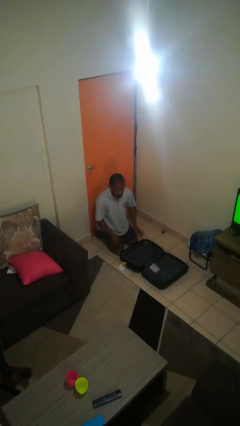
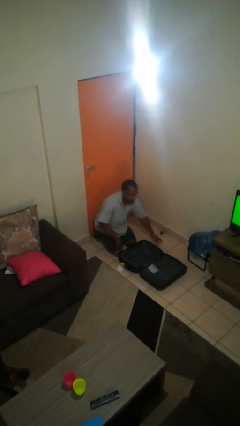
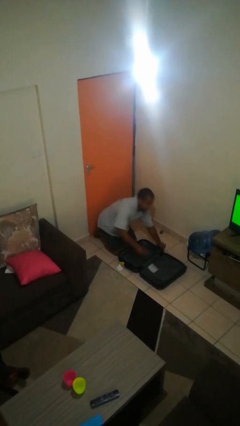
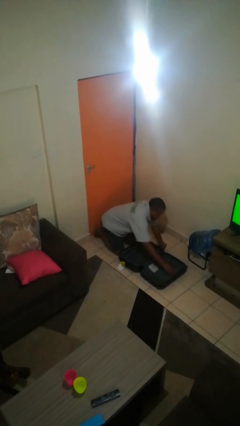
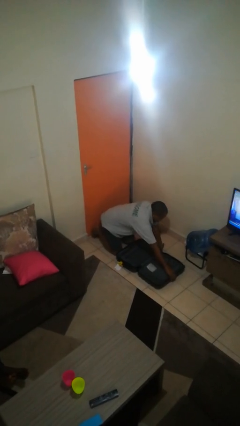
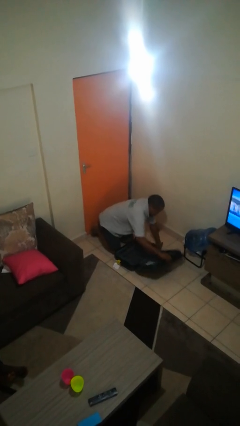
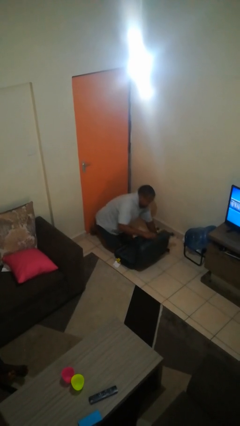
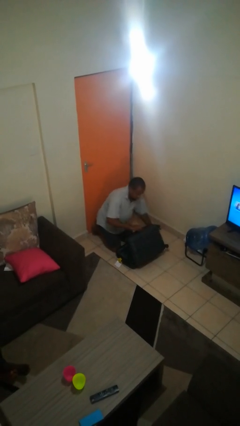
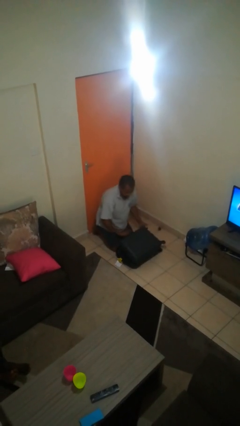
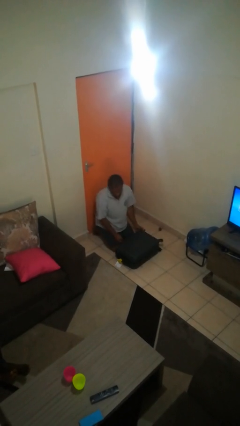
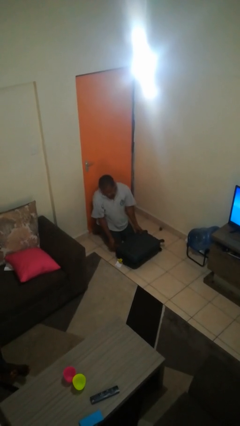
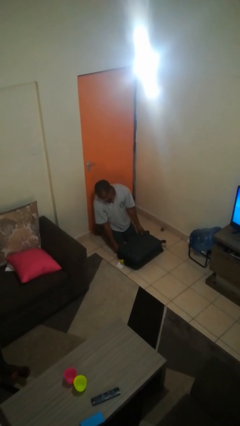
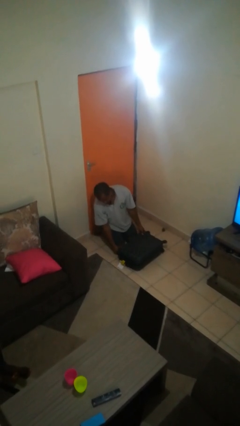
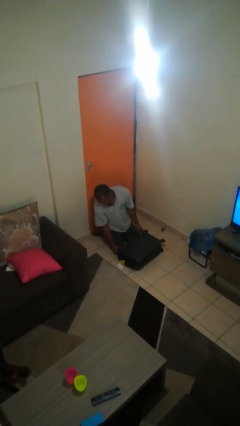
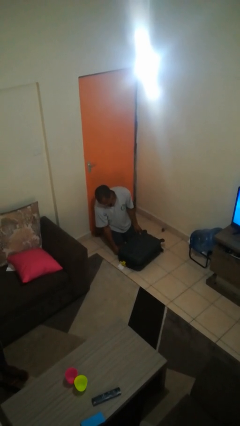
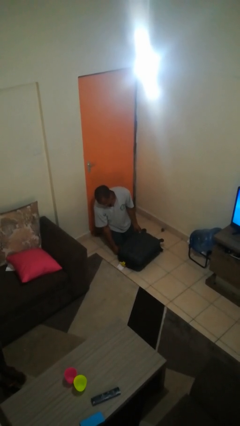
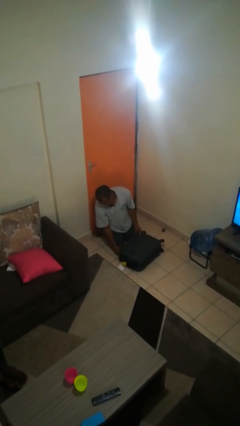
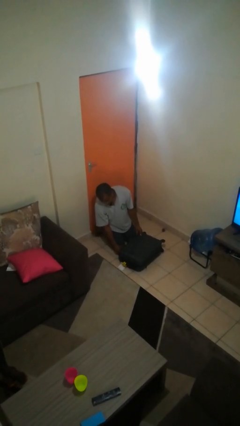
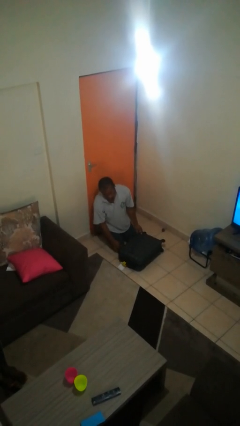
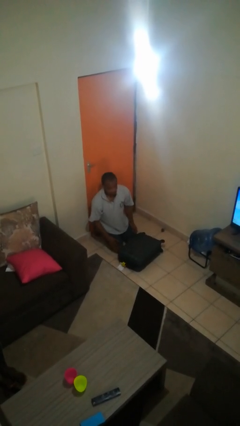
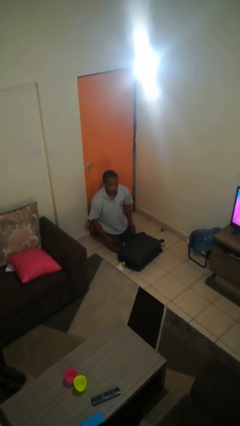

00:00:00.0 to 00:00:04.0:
person closes suitcase

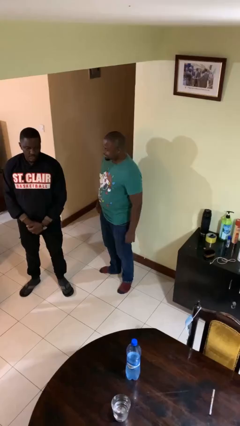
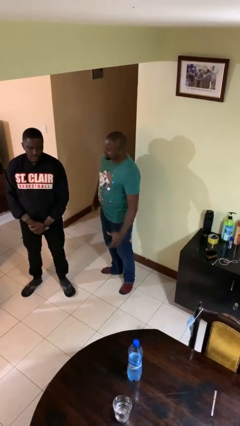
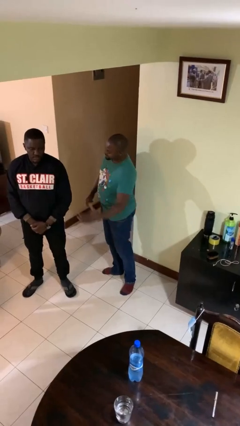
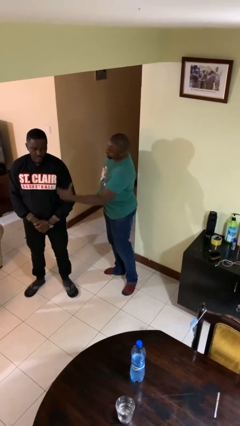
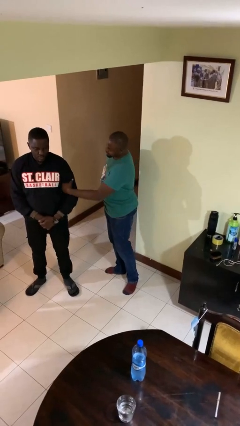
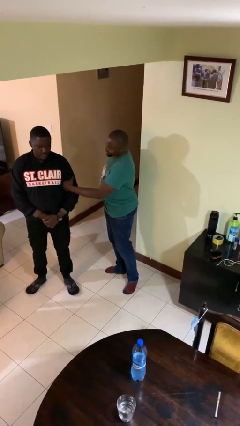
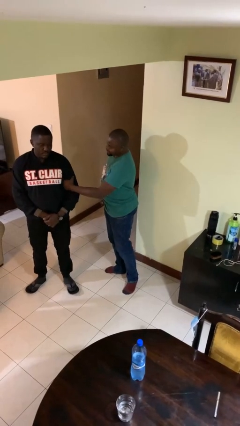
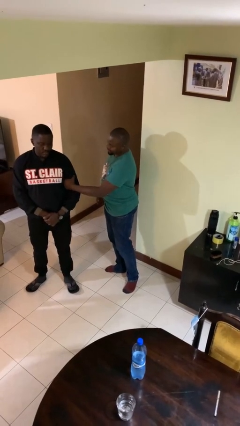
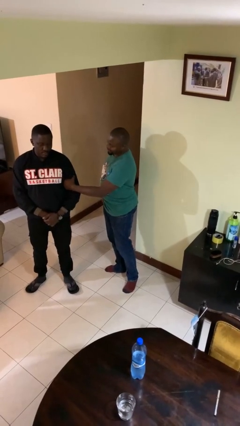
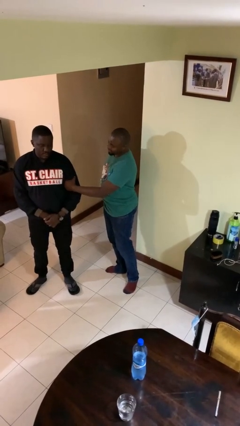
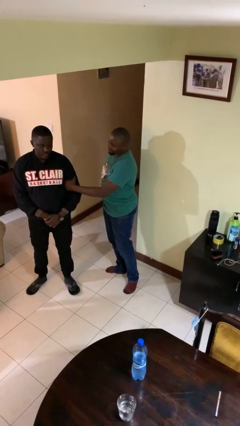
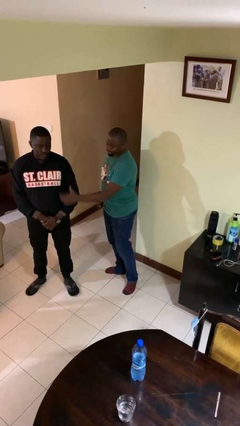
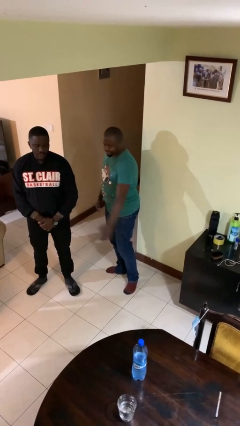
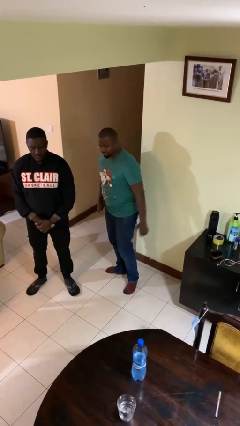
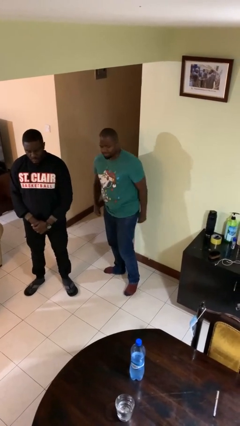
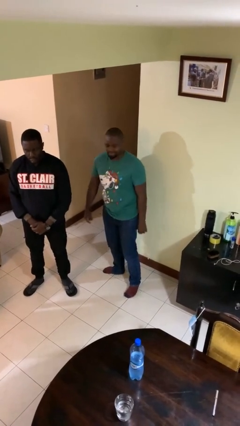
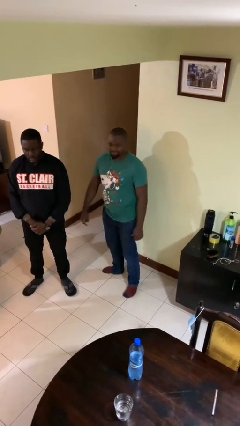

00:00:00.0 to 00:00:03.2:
person grabs person by bicep

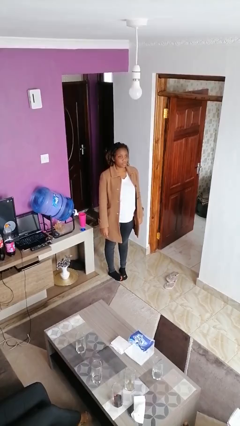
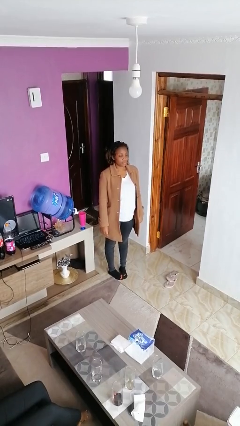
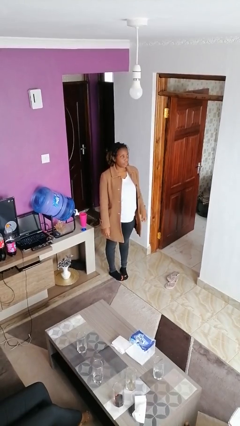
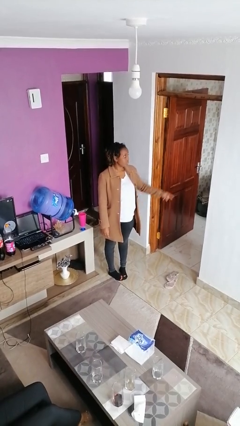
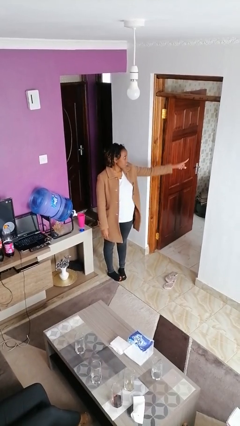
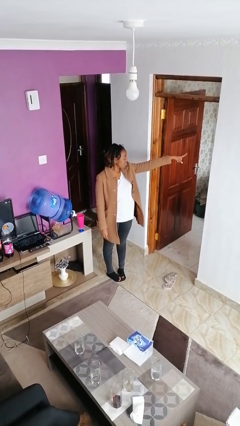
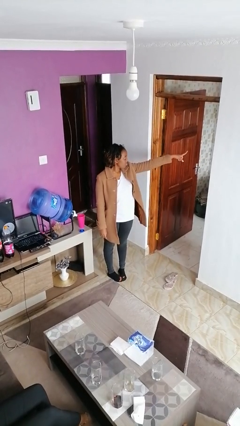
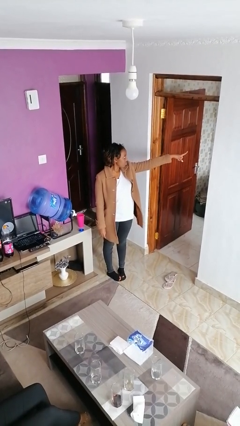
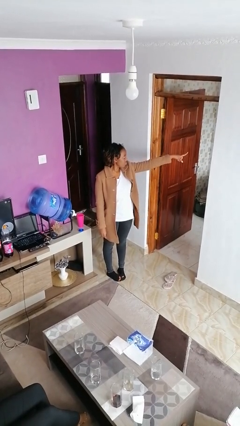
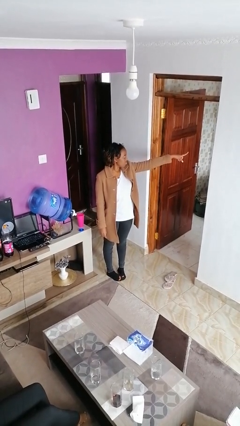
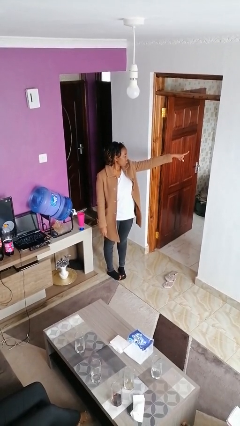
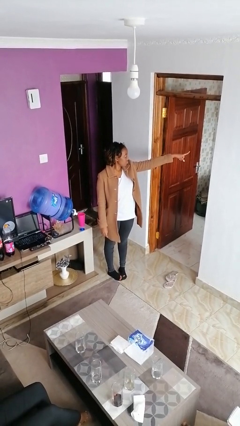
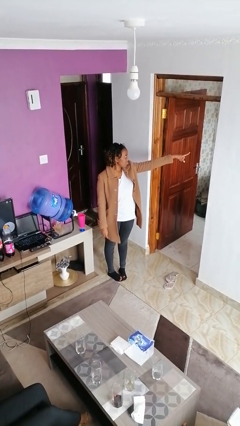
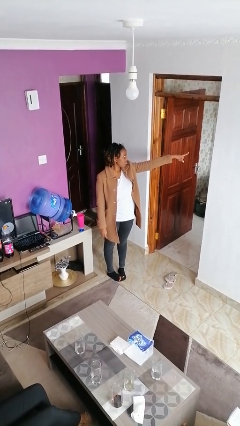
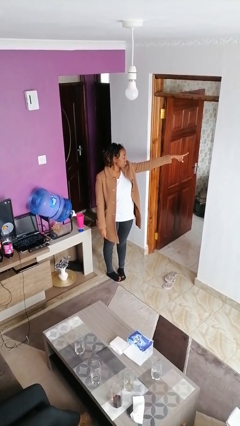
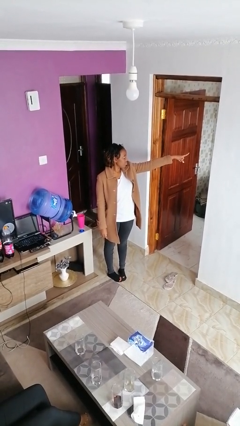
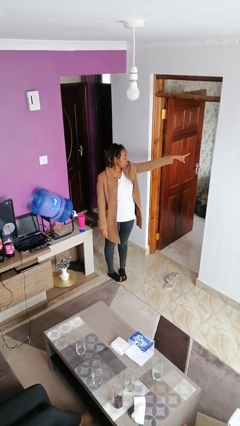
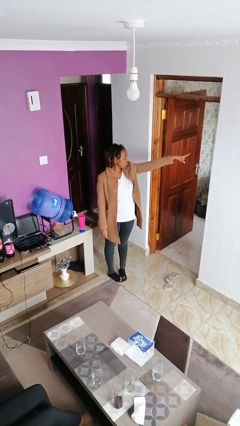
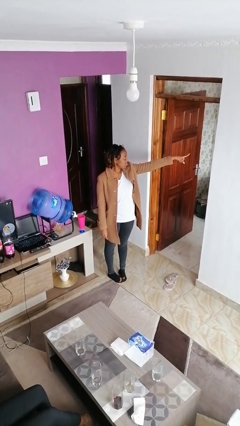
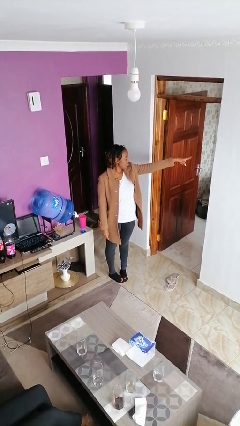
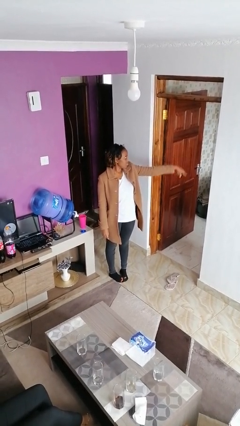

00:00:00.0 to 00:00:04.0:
person points at person

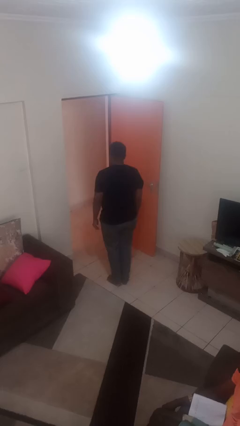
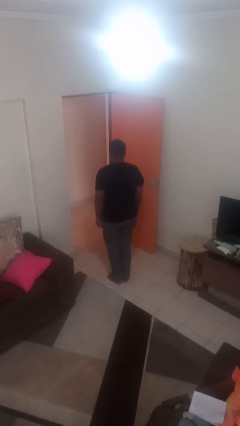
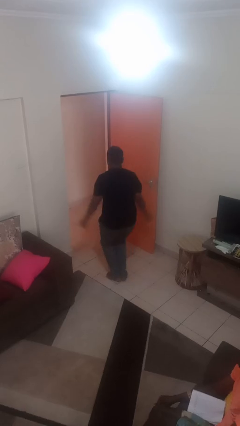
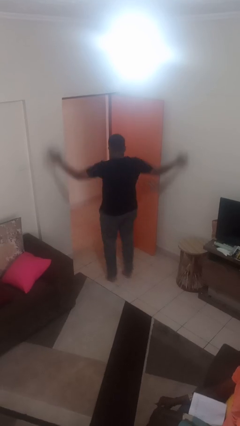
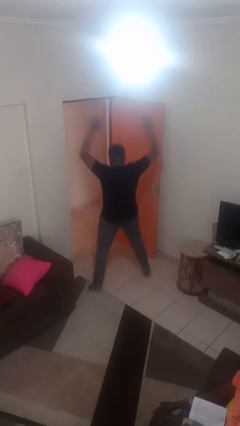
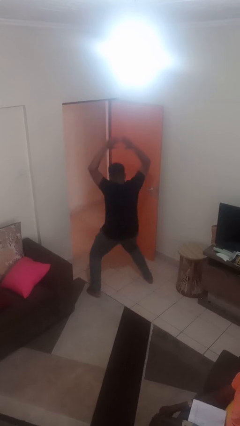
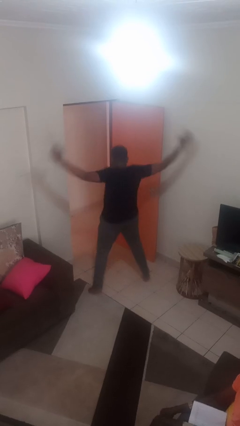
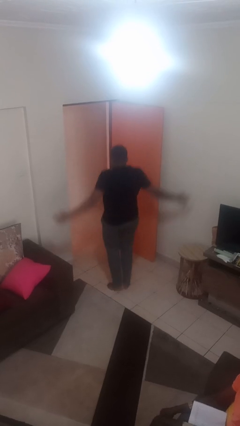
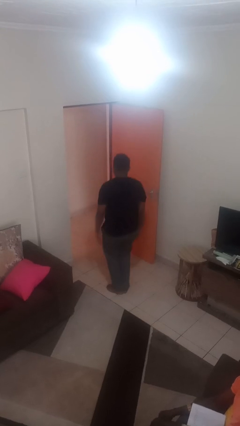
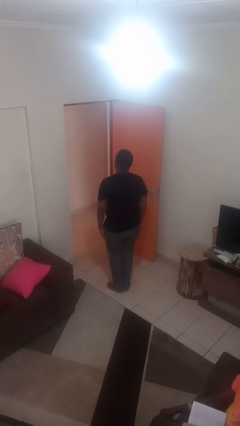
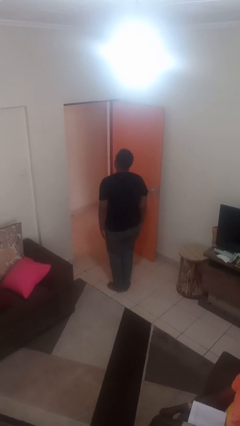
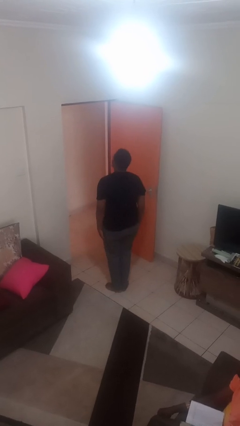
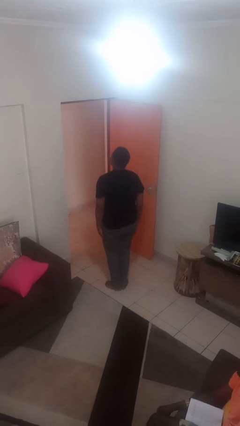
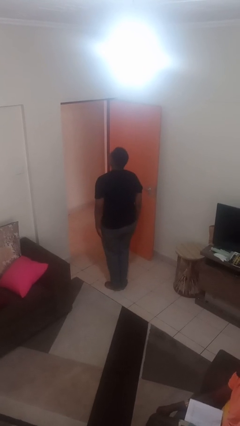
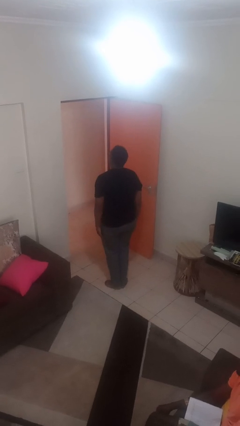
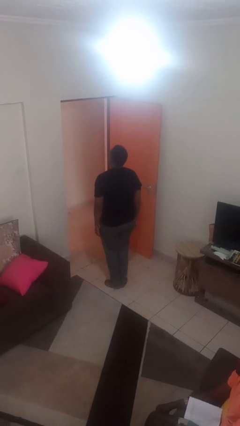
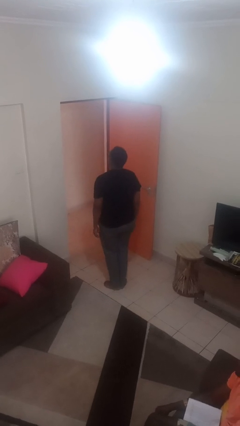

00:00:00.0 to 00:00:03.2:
person exercises with jumping jacks

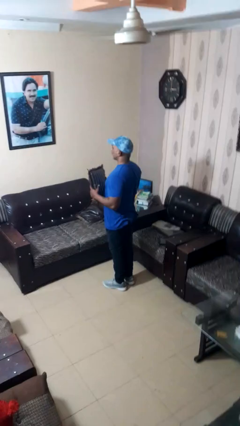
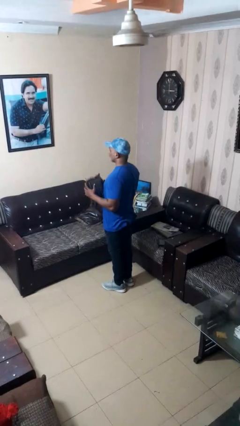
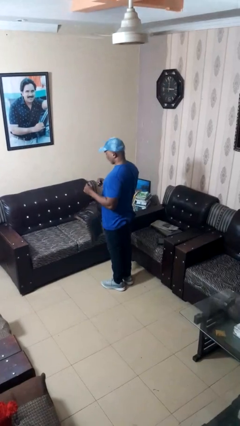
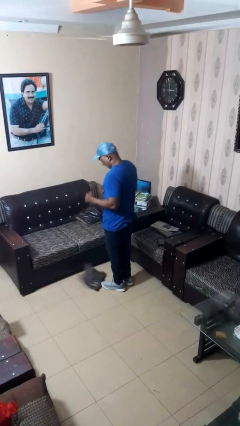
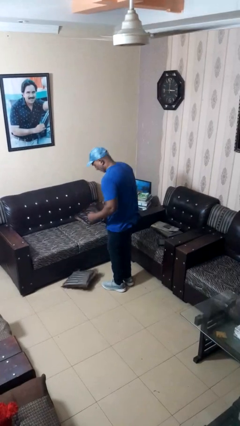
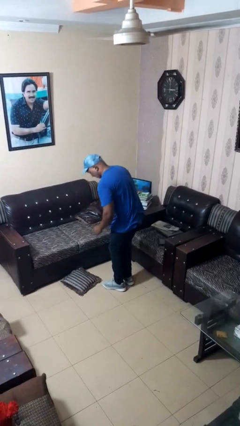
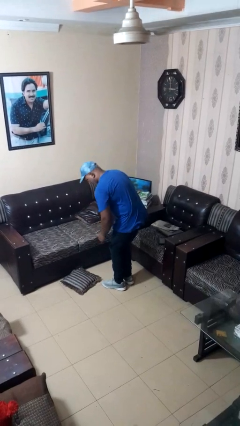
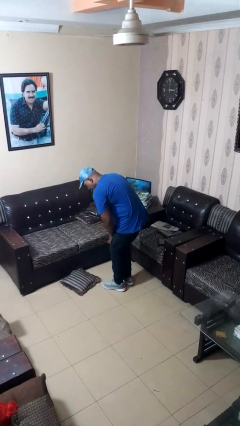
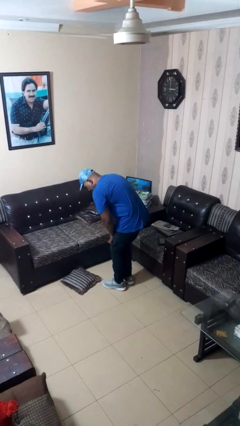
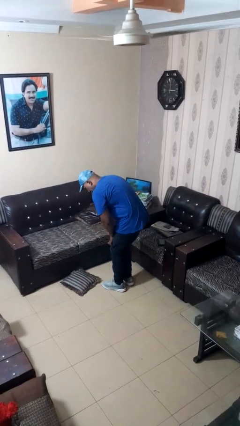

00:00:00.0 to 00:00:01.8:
person drops object

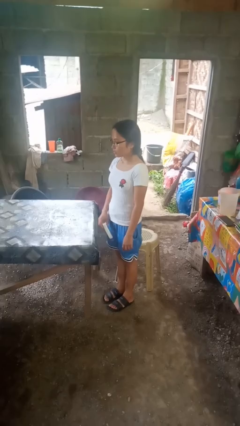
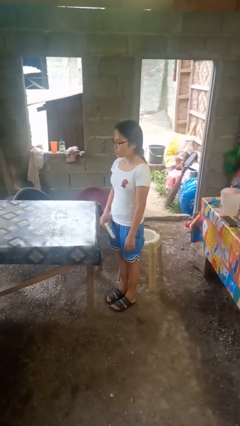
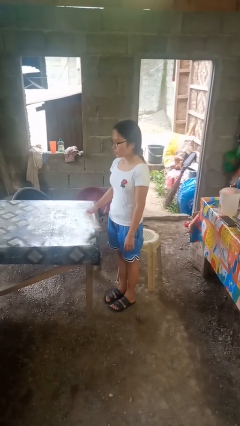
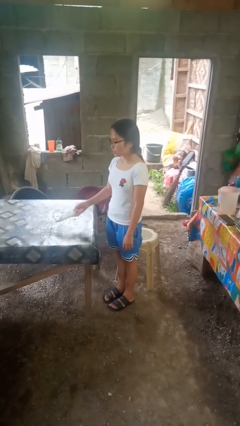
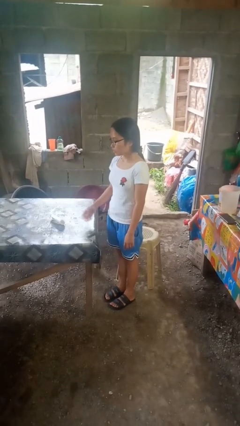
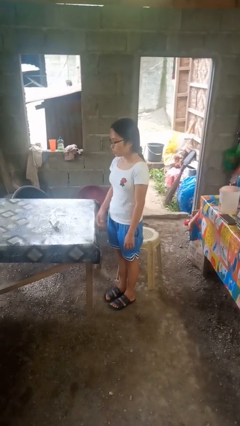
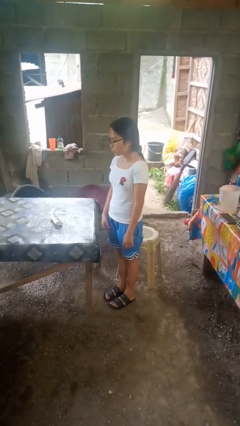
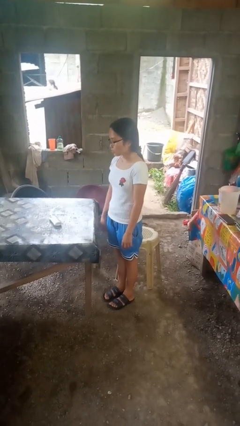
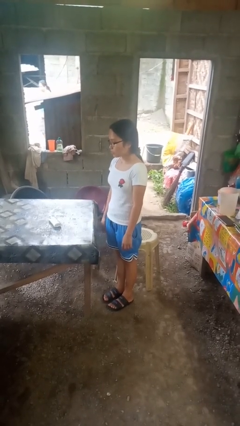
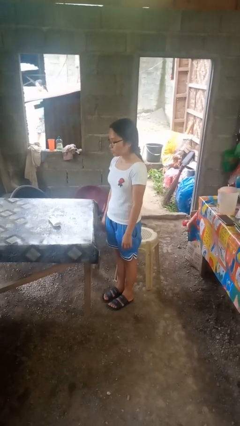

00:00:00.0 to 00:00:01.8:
person throws object on table
